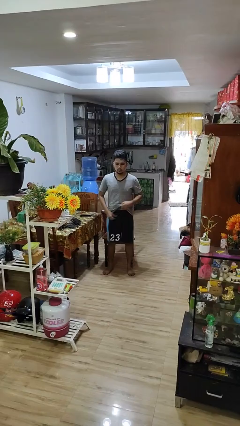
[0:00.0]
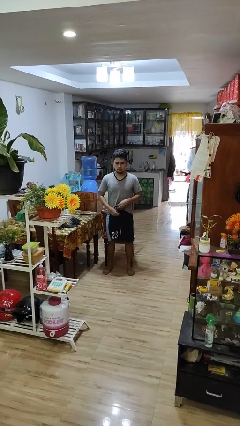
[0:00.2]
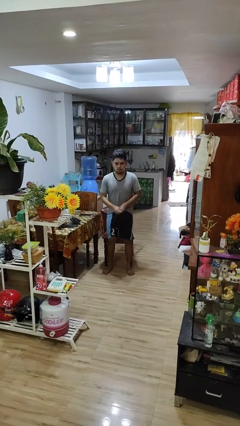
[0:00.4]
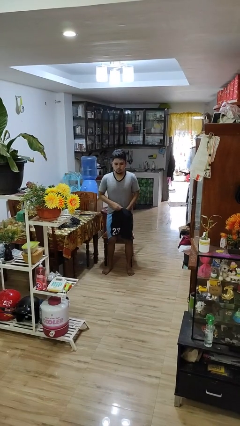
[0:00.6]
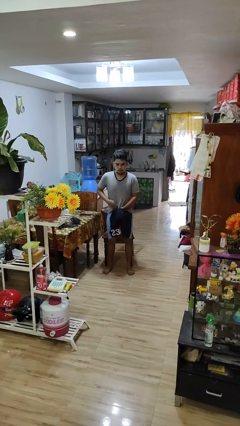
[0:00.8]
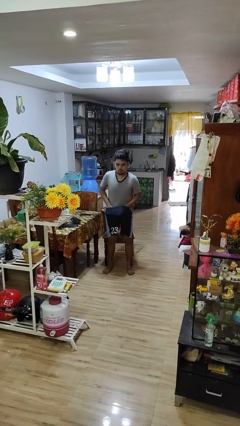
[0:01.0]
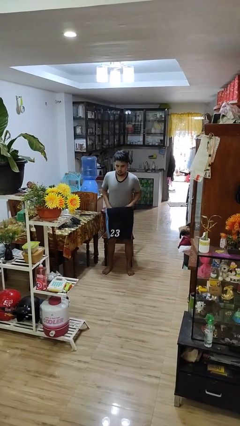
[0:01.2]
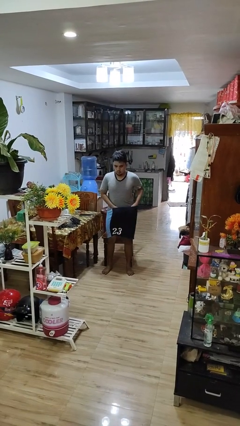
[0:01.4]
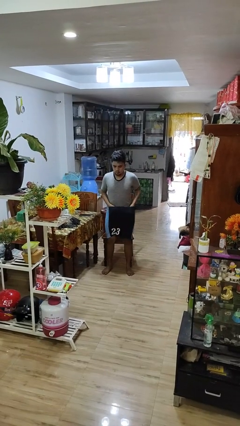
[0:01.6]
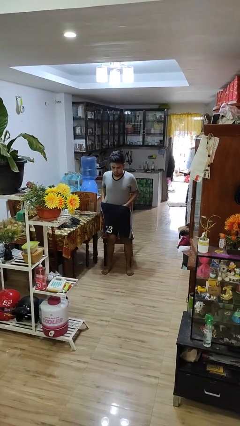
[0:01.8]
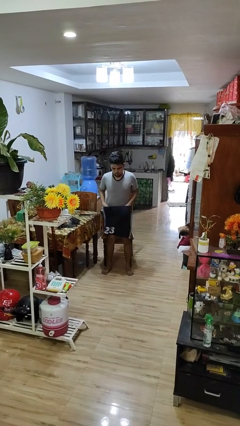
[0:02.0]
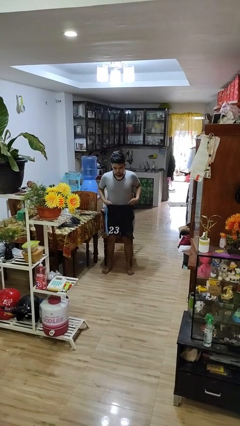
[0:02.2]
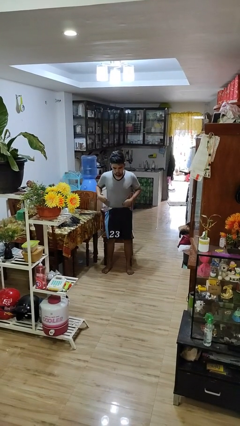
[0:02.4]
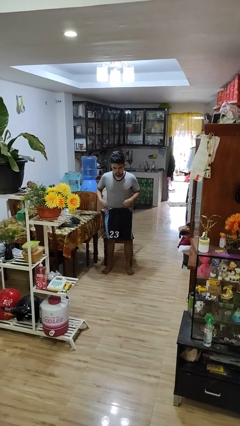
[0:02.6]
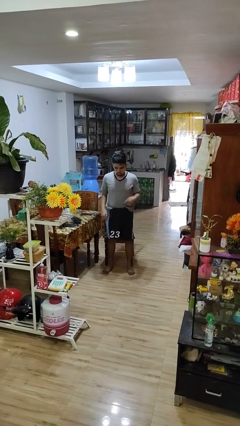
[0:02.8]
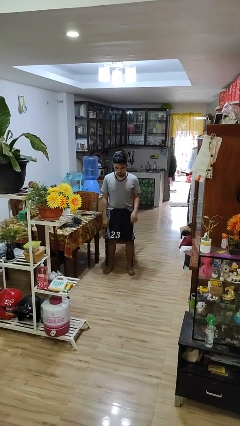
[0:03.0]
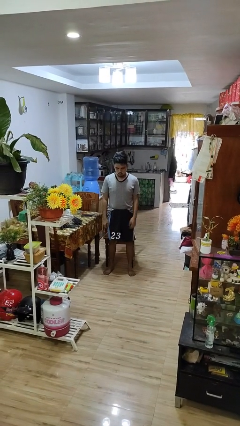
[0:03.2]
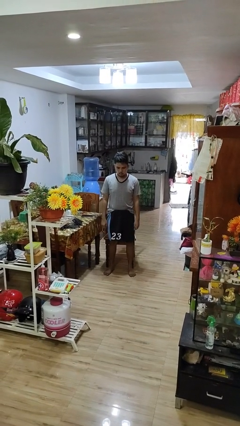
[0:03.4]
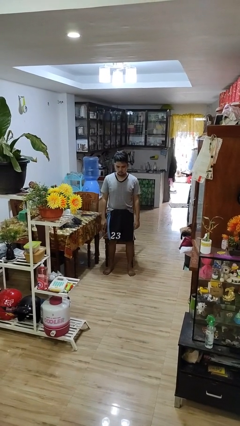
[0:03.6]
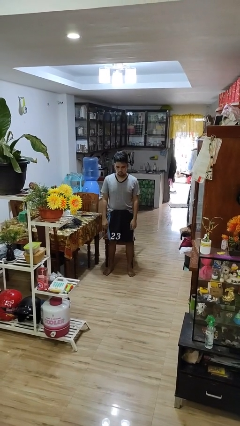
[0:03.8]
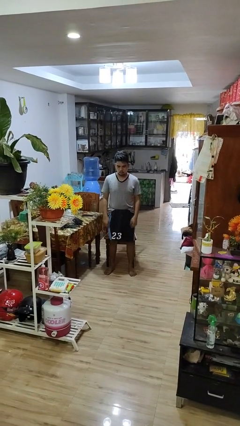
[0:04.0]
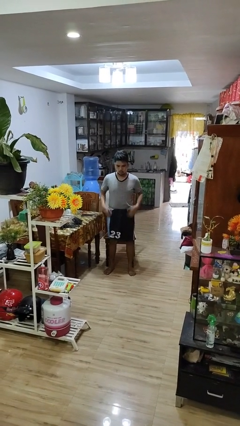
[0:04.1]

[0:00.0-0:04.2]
person tucks in shirt

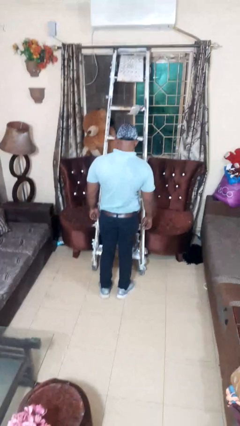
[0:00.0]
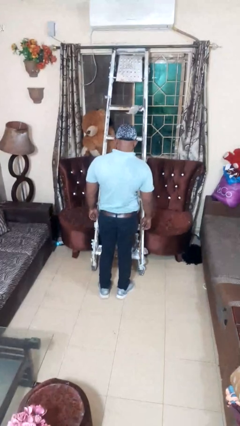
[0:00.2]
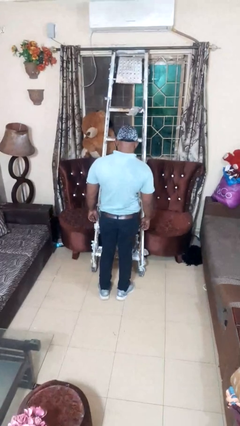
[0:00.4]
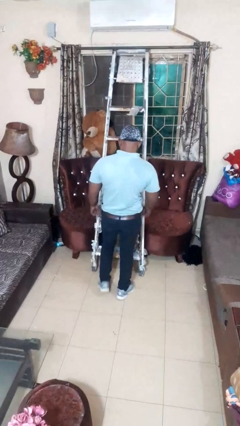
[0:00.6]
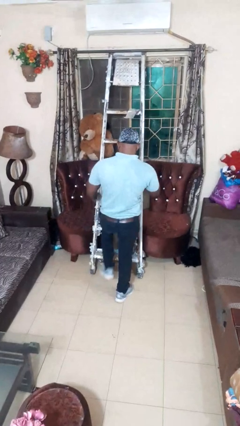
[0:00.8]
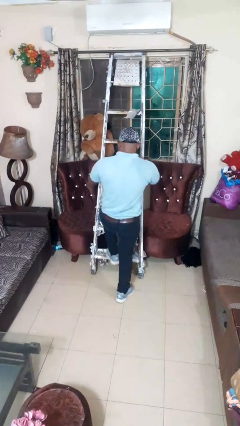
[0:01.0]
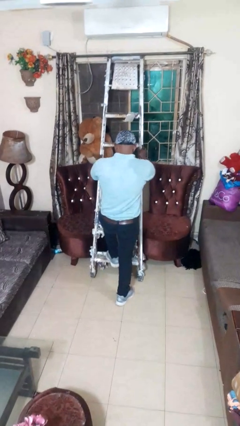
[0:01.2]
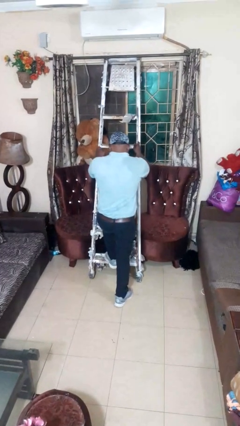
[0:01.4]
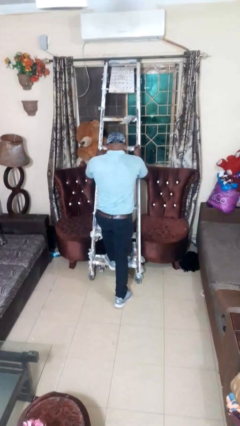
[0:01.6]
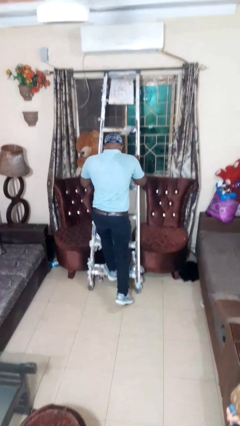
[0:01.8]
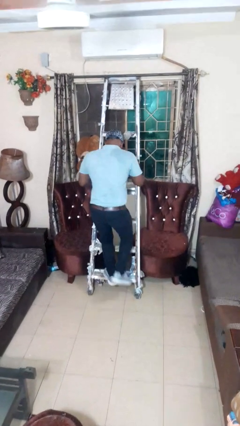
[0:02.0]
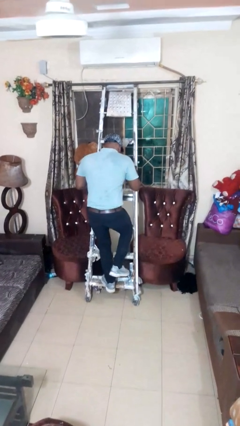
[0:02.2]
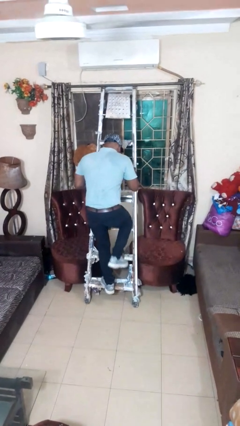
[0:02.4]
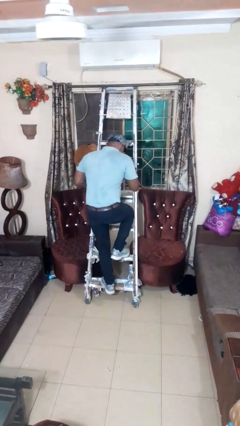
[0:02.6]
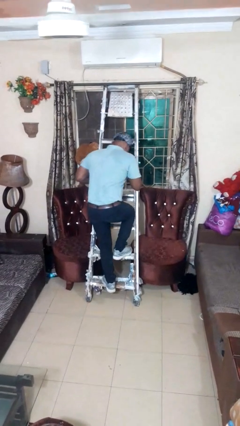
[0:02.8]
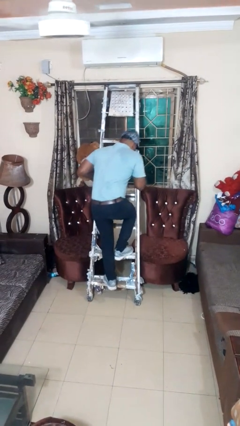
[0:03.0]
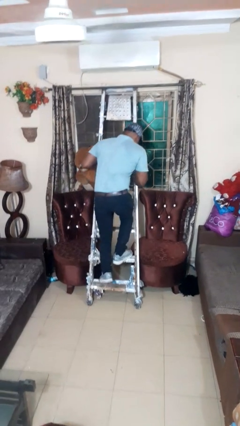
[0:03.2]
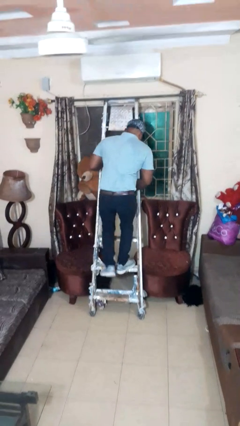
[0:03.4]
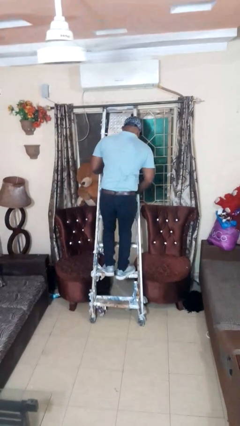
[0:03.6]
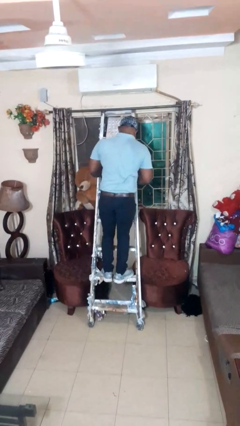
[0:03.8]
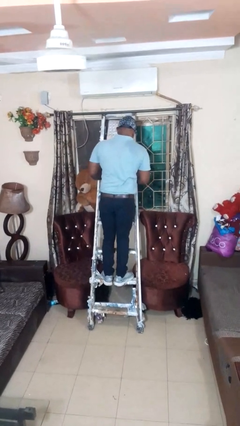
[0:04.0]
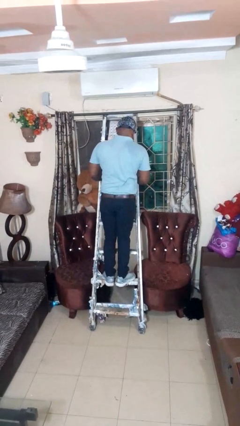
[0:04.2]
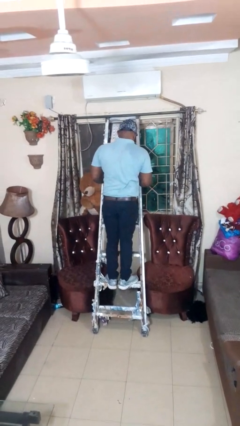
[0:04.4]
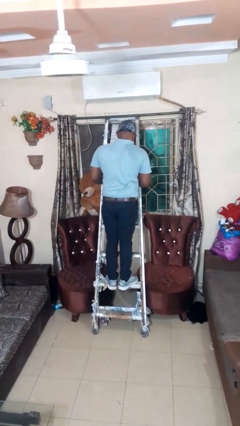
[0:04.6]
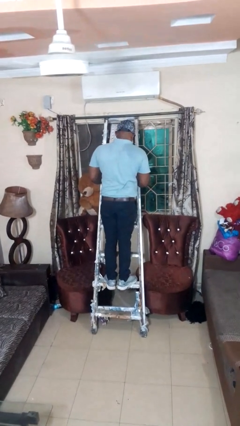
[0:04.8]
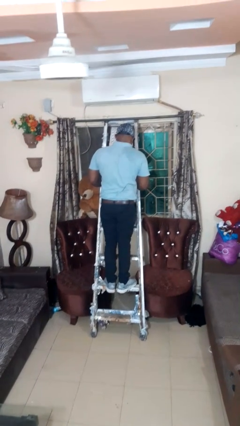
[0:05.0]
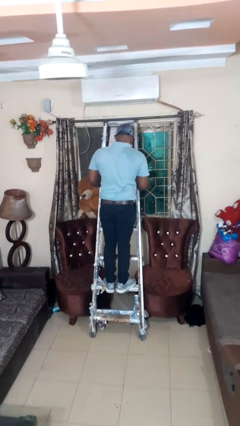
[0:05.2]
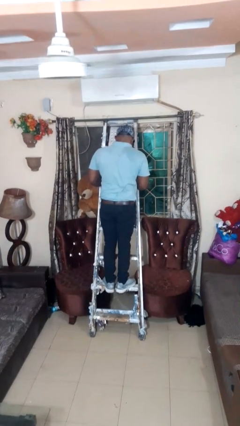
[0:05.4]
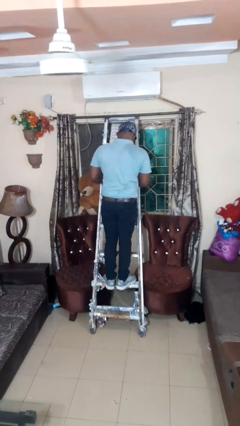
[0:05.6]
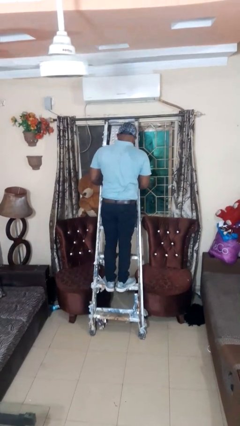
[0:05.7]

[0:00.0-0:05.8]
person climbs up ladder

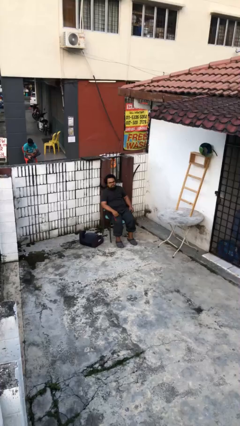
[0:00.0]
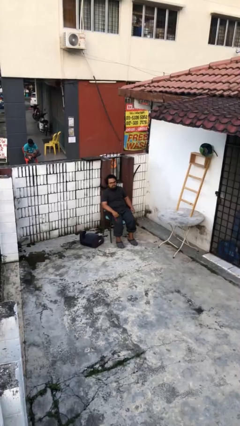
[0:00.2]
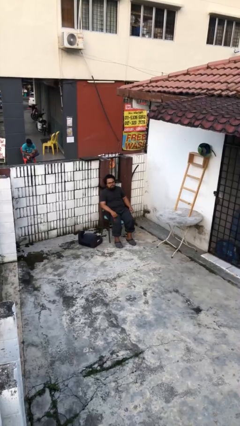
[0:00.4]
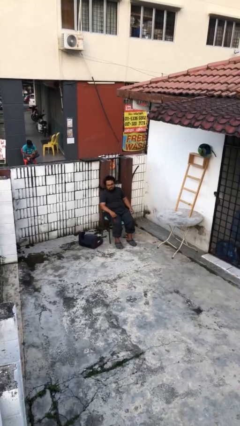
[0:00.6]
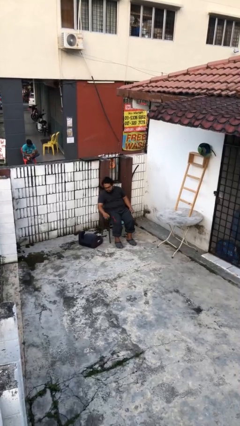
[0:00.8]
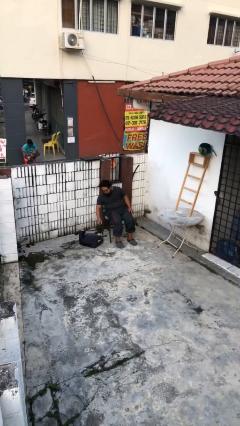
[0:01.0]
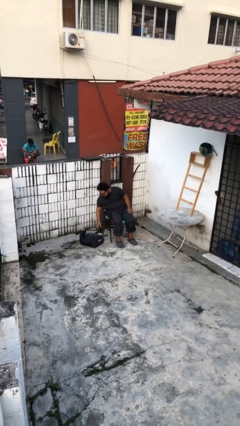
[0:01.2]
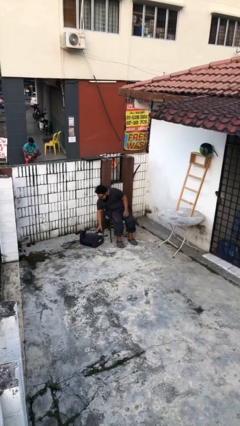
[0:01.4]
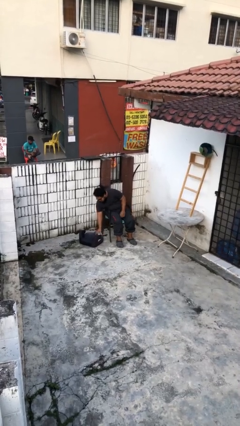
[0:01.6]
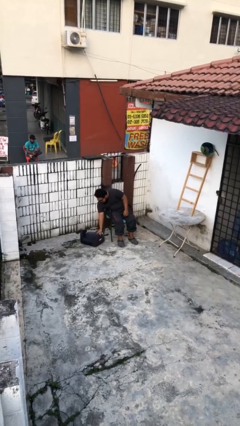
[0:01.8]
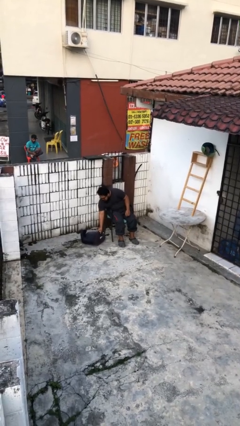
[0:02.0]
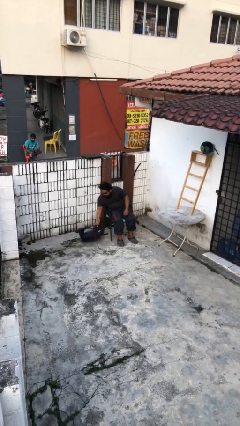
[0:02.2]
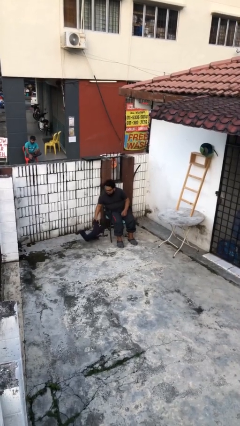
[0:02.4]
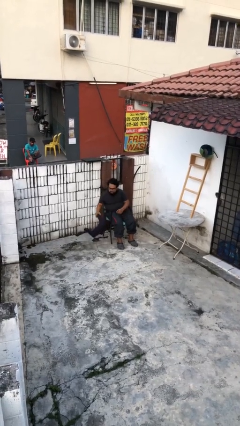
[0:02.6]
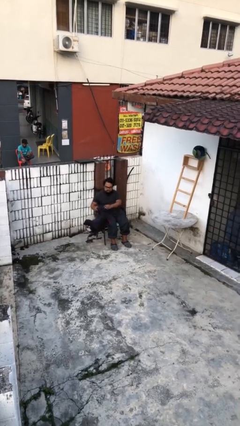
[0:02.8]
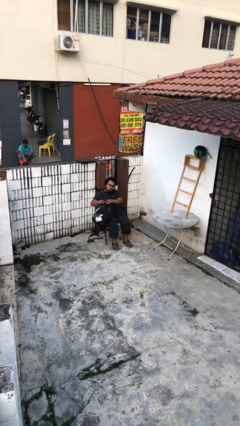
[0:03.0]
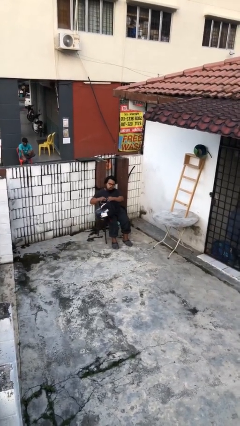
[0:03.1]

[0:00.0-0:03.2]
person picks up object from floor

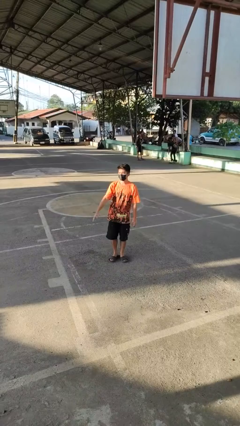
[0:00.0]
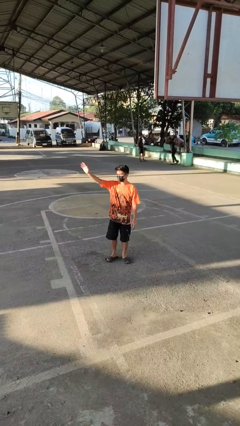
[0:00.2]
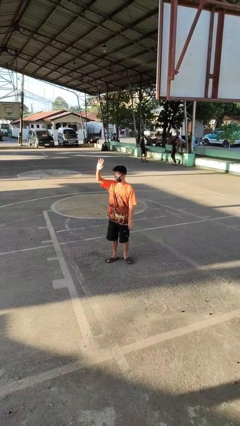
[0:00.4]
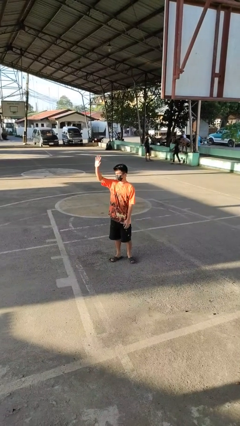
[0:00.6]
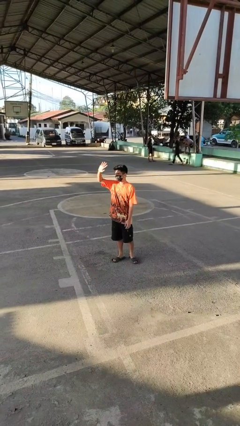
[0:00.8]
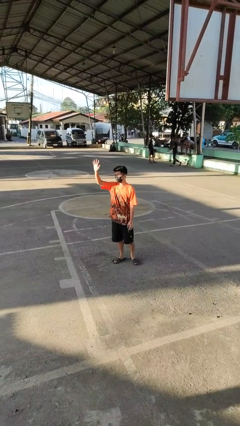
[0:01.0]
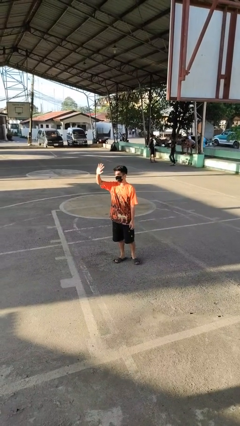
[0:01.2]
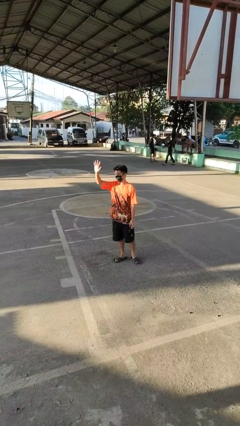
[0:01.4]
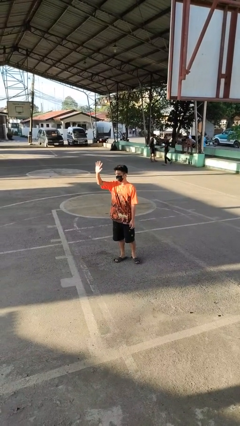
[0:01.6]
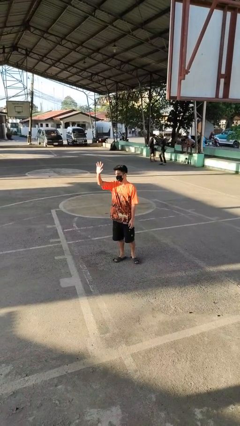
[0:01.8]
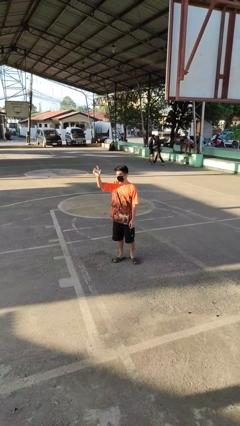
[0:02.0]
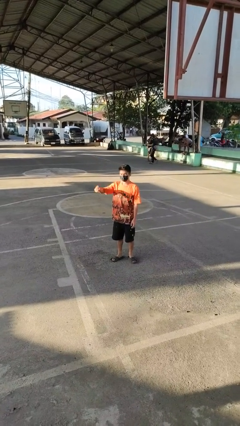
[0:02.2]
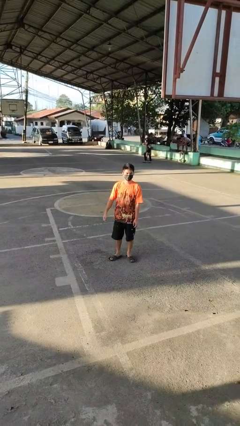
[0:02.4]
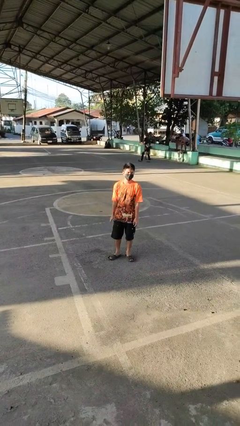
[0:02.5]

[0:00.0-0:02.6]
person waves at person

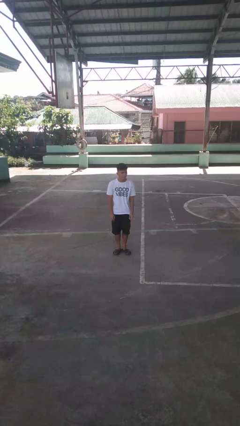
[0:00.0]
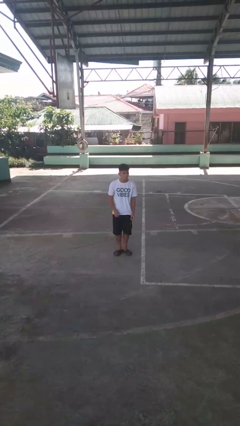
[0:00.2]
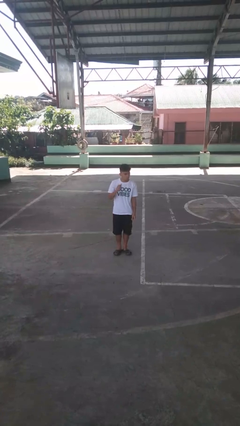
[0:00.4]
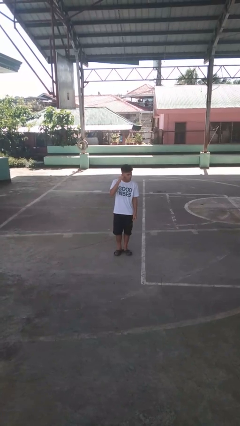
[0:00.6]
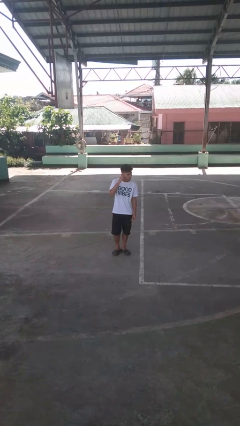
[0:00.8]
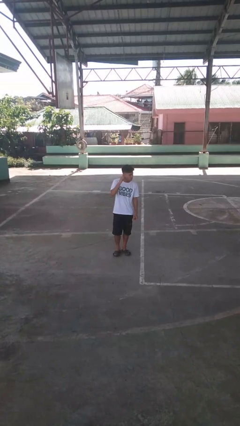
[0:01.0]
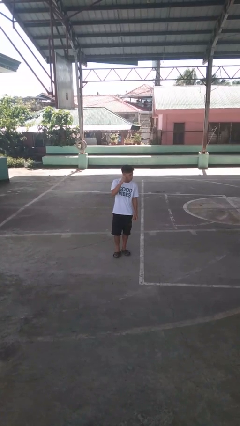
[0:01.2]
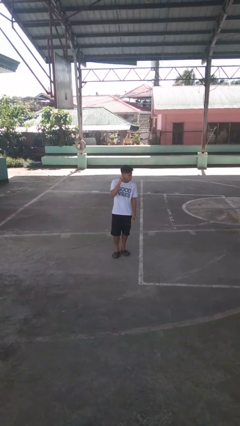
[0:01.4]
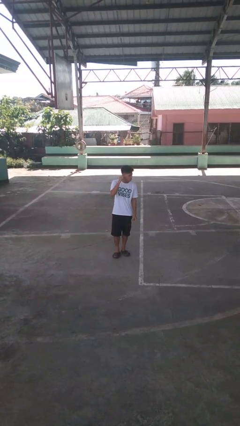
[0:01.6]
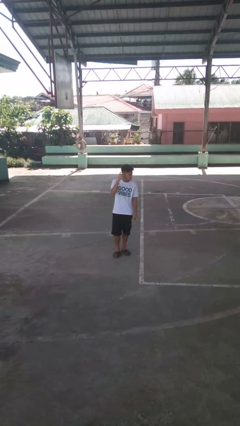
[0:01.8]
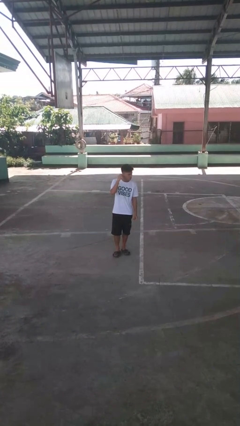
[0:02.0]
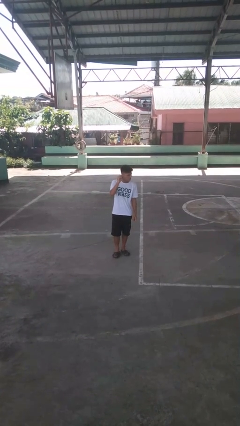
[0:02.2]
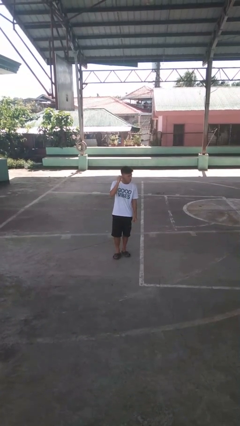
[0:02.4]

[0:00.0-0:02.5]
person touches earlobe
